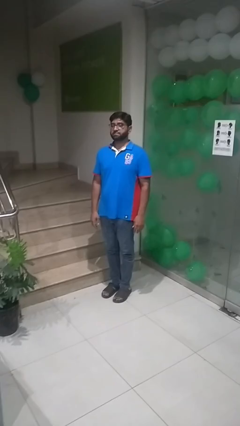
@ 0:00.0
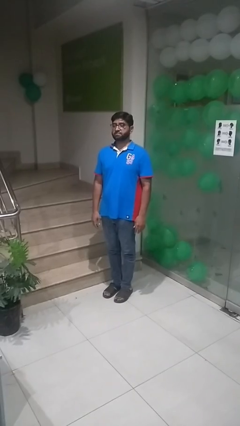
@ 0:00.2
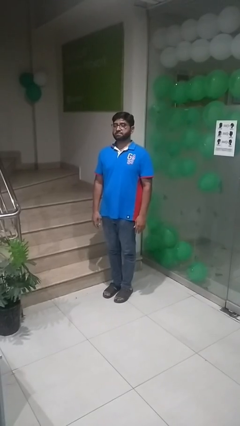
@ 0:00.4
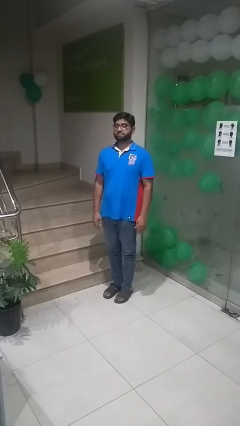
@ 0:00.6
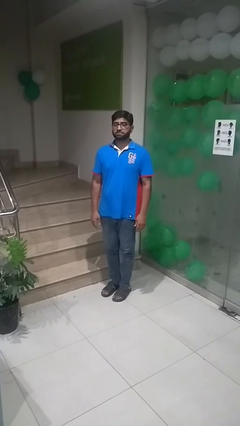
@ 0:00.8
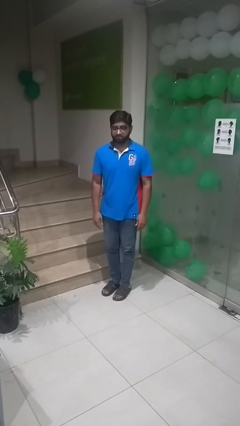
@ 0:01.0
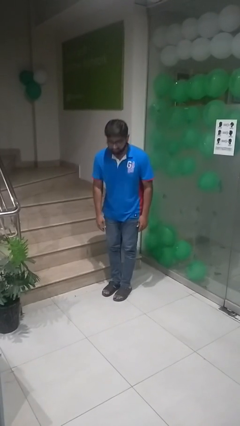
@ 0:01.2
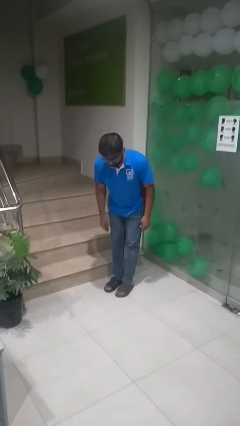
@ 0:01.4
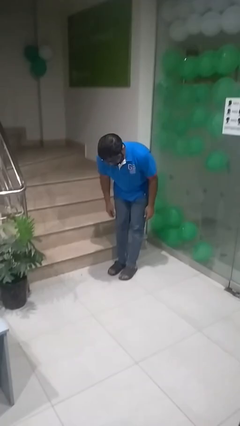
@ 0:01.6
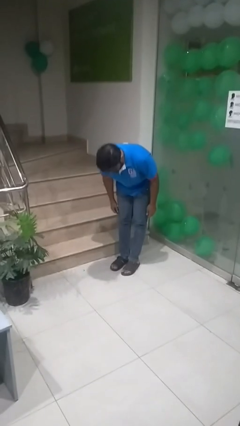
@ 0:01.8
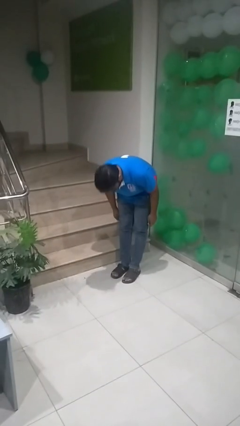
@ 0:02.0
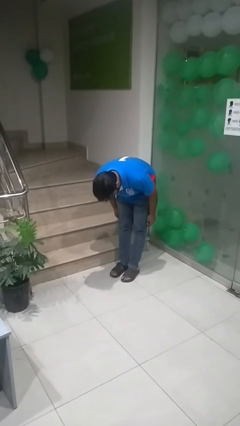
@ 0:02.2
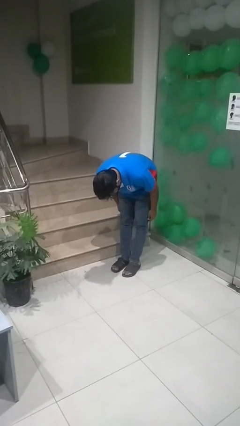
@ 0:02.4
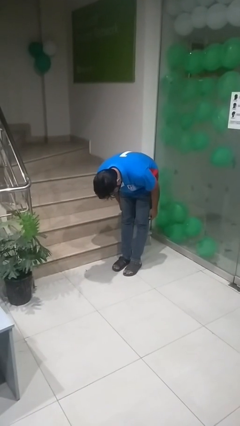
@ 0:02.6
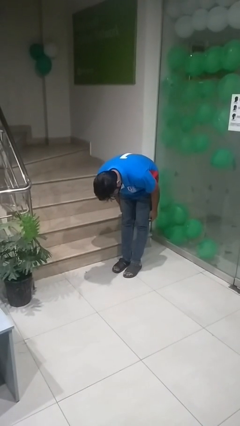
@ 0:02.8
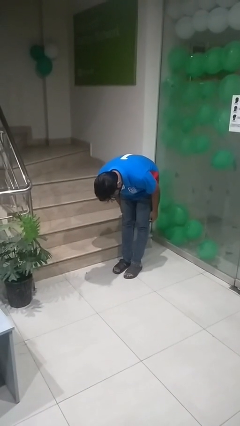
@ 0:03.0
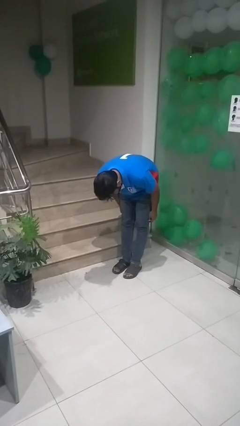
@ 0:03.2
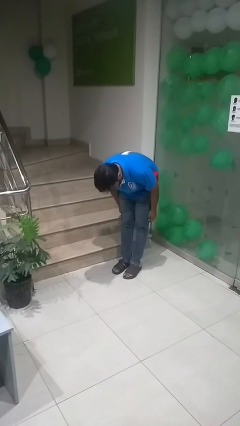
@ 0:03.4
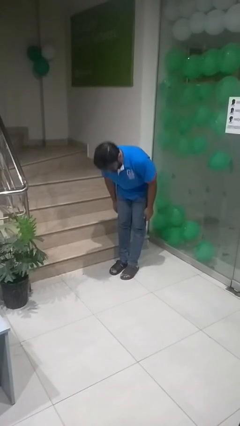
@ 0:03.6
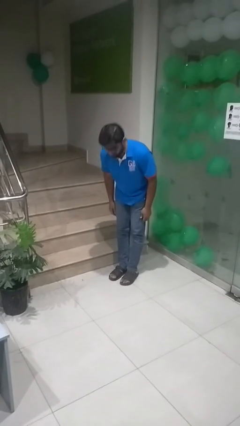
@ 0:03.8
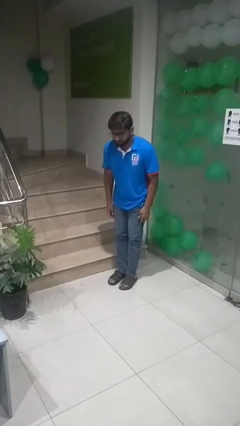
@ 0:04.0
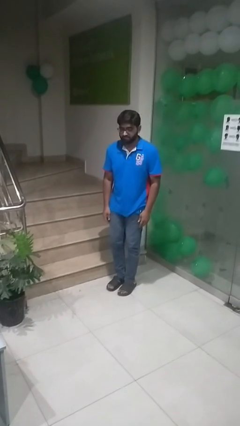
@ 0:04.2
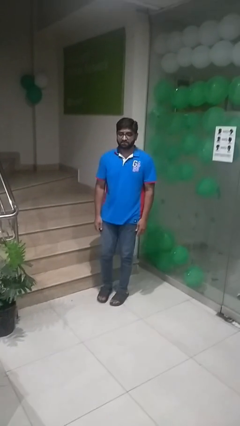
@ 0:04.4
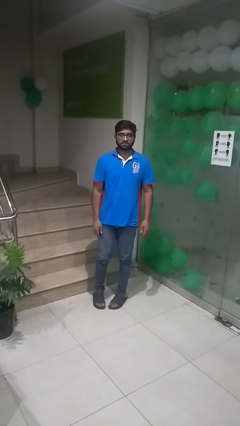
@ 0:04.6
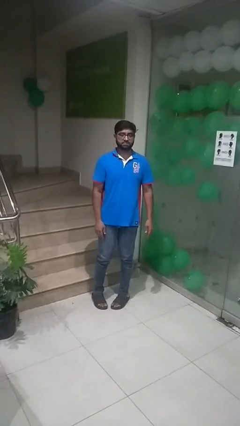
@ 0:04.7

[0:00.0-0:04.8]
person bows

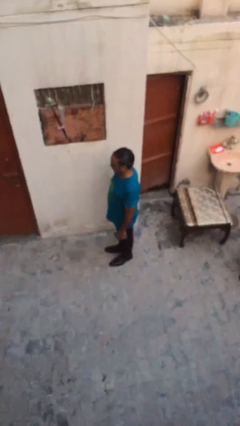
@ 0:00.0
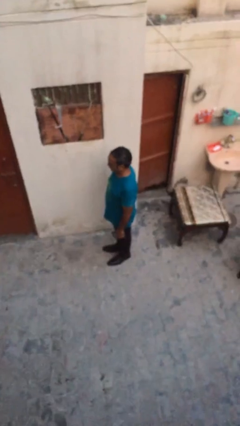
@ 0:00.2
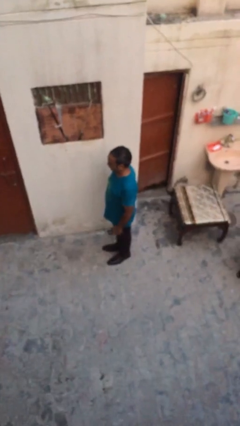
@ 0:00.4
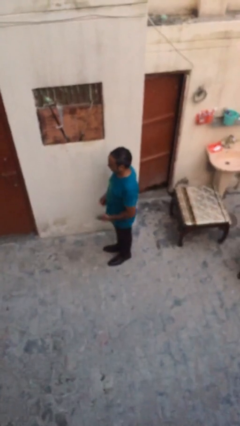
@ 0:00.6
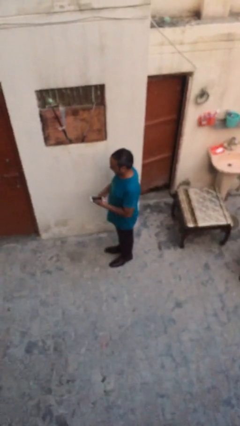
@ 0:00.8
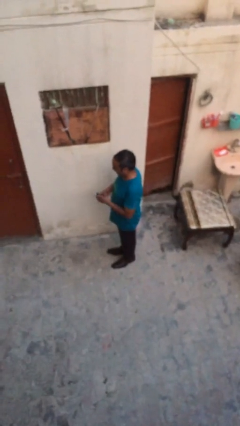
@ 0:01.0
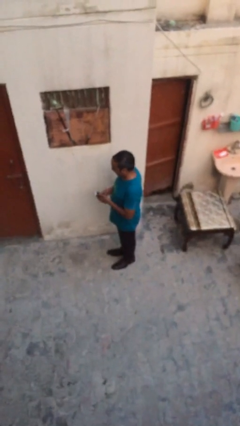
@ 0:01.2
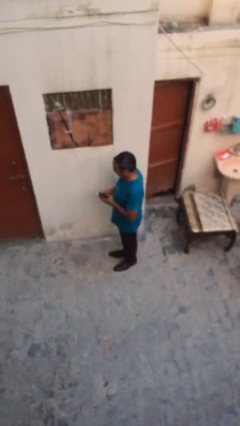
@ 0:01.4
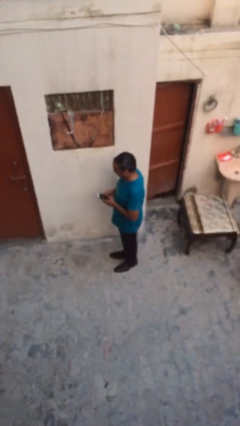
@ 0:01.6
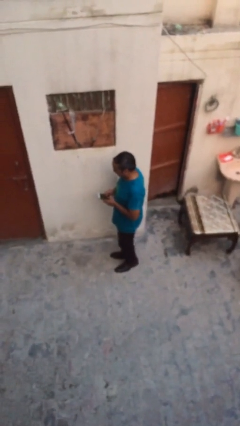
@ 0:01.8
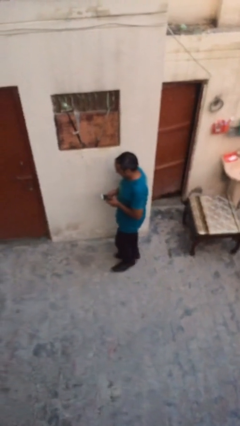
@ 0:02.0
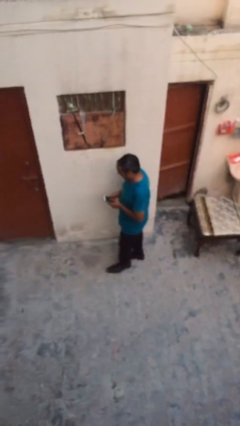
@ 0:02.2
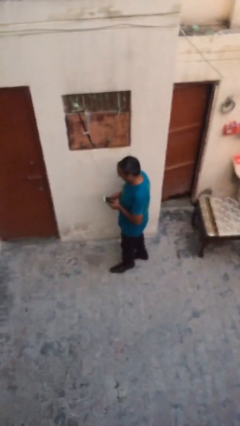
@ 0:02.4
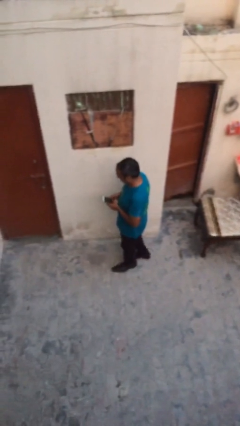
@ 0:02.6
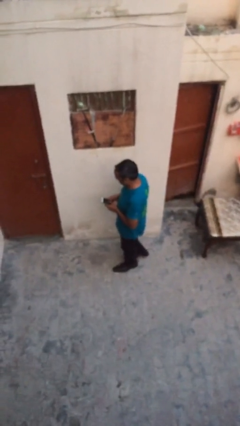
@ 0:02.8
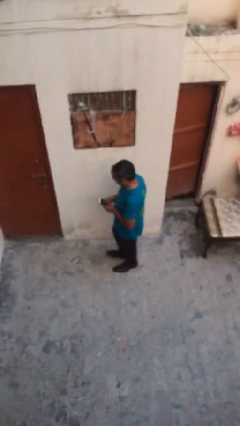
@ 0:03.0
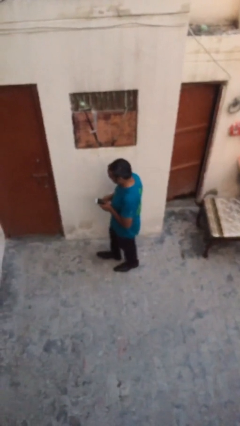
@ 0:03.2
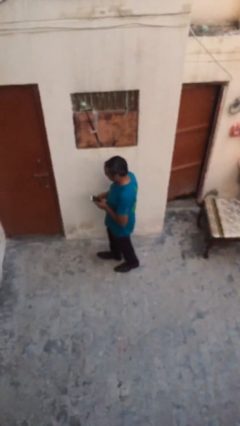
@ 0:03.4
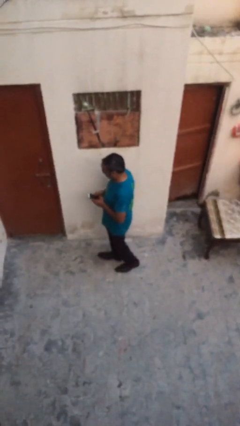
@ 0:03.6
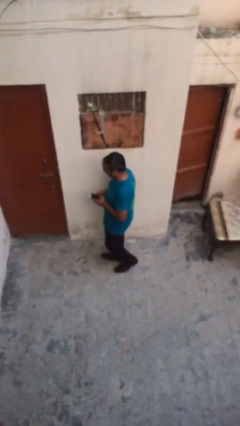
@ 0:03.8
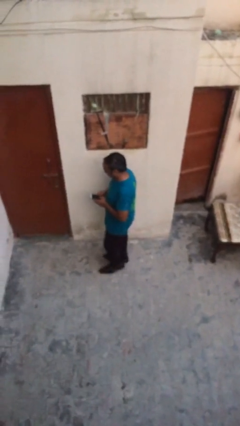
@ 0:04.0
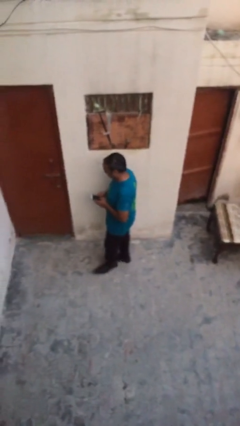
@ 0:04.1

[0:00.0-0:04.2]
person texts on phone

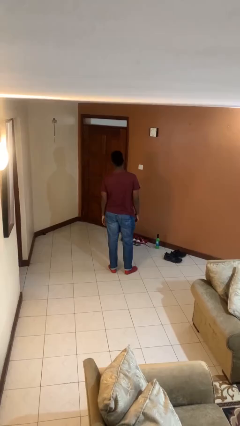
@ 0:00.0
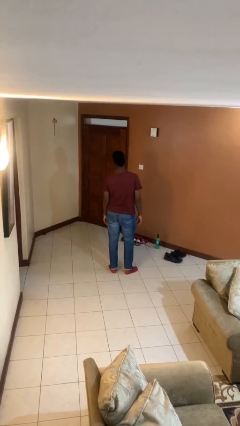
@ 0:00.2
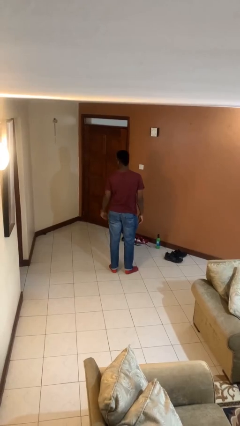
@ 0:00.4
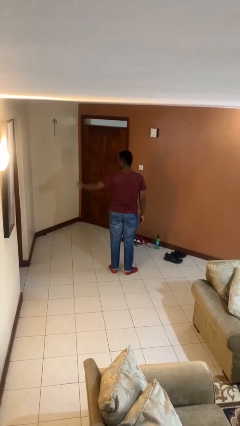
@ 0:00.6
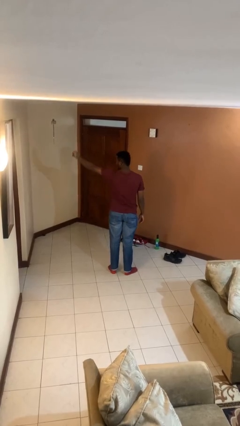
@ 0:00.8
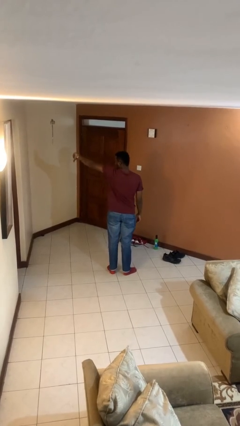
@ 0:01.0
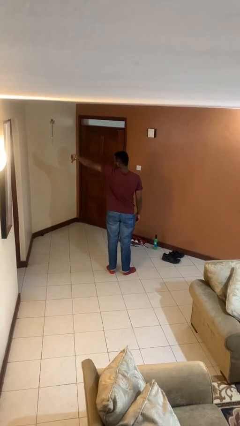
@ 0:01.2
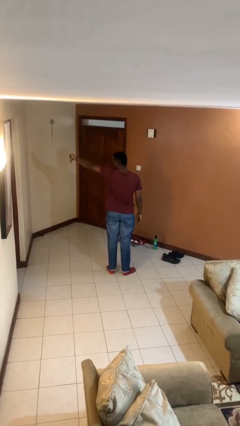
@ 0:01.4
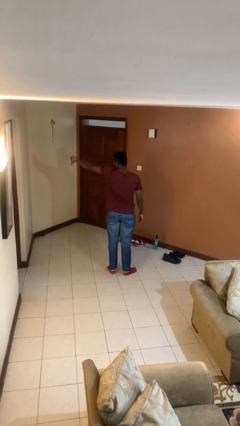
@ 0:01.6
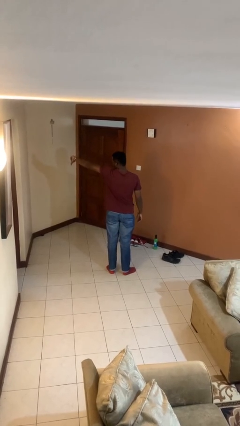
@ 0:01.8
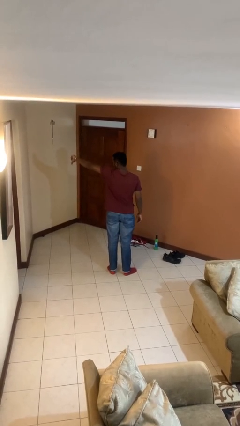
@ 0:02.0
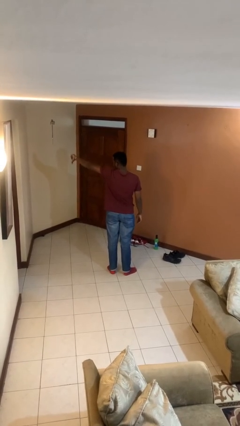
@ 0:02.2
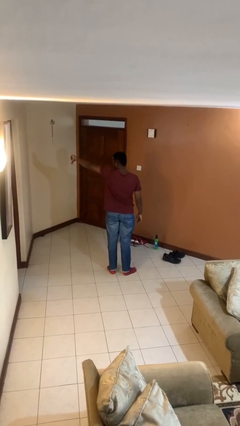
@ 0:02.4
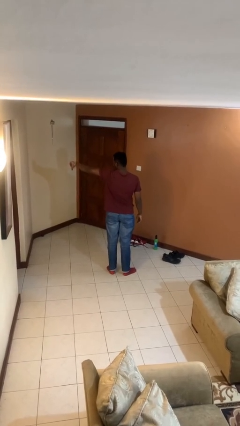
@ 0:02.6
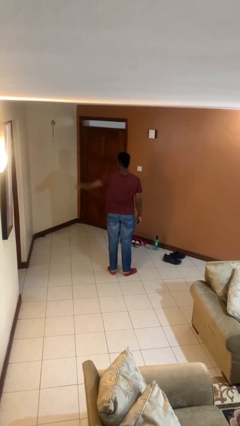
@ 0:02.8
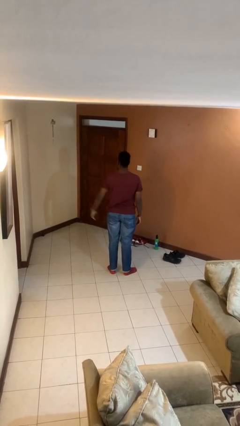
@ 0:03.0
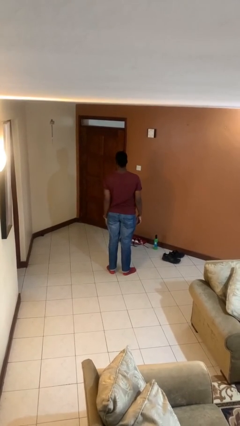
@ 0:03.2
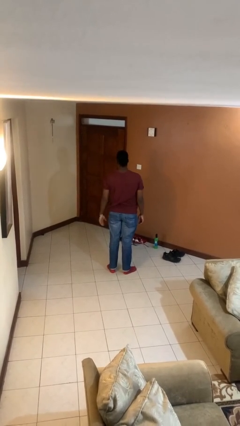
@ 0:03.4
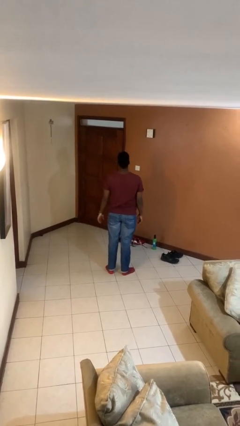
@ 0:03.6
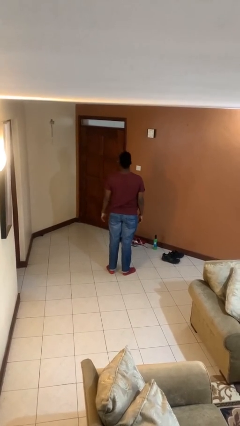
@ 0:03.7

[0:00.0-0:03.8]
person gestures thumbs down

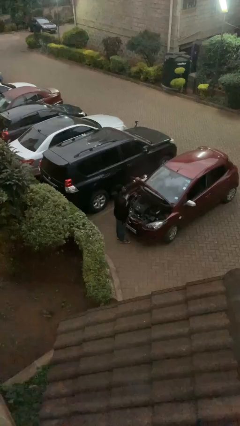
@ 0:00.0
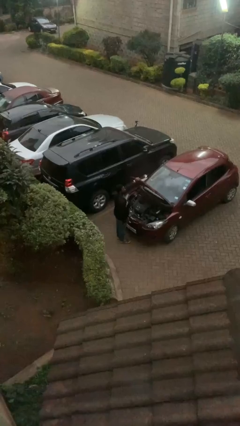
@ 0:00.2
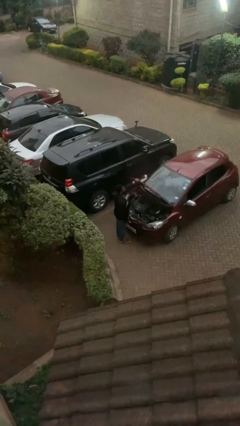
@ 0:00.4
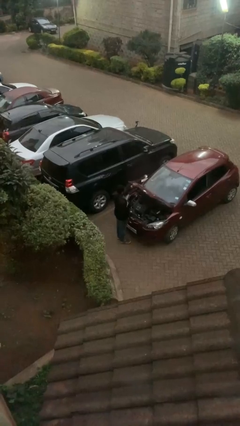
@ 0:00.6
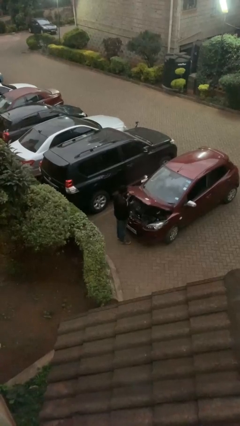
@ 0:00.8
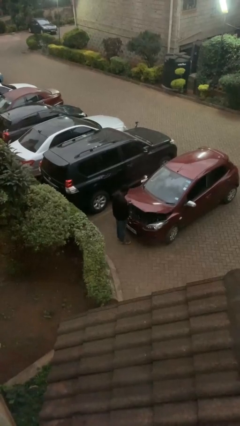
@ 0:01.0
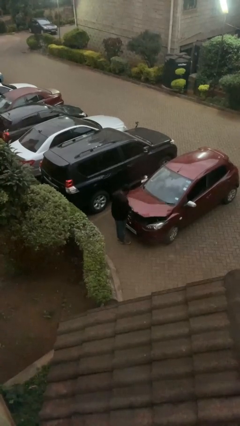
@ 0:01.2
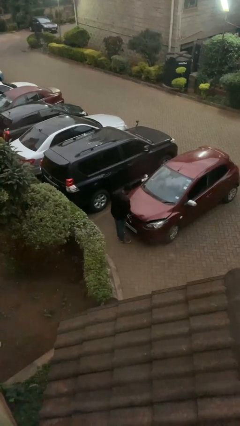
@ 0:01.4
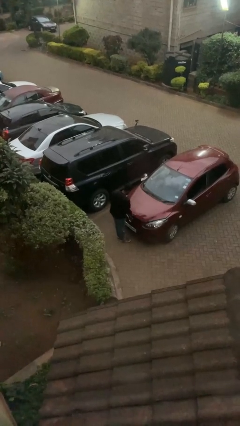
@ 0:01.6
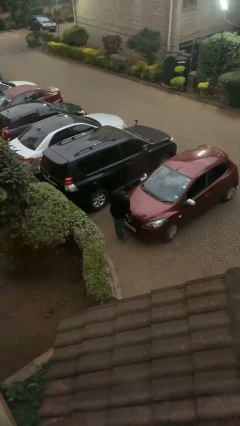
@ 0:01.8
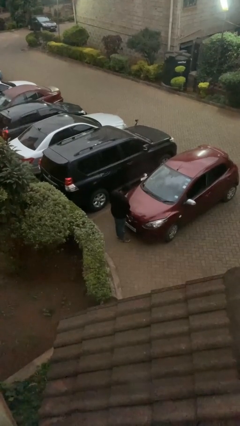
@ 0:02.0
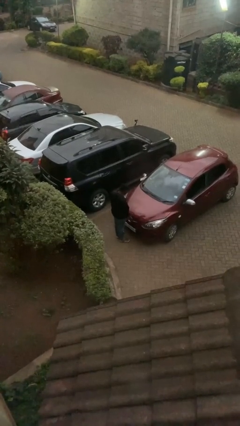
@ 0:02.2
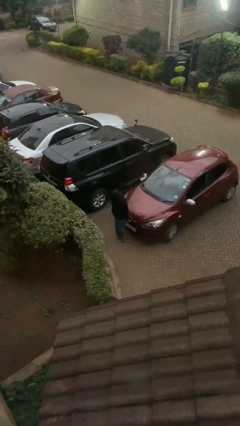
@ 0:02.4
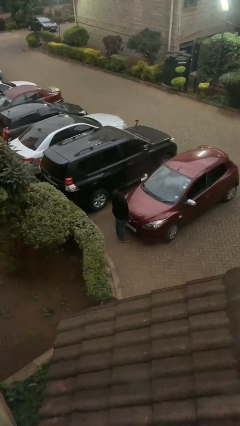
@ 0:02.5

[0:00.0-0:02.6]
person closes car hood

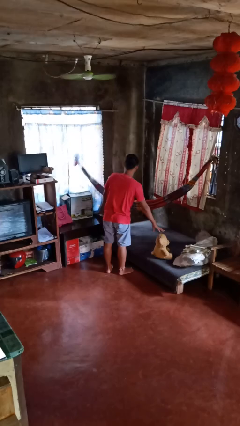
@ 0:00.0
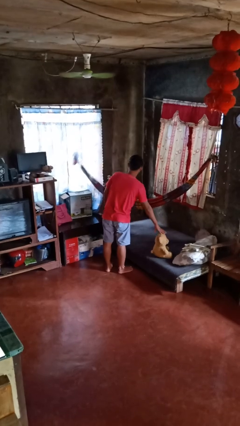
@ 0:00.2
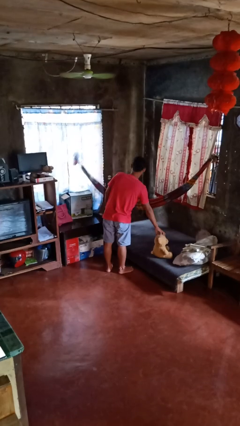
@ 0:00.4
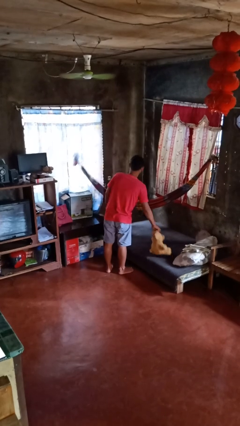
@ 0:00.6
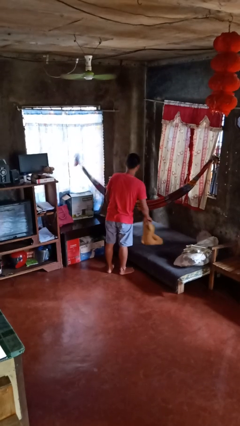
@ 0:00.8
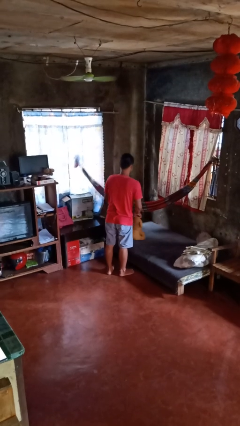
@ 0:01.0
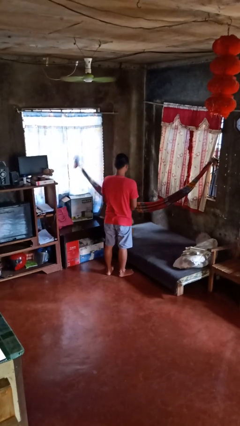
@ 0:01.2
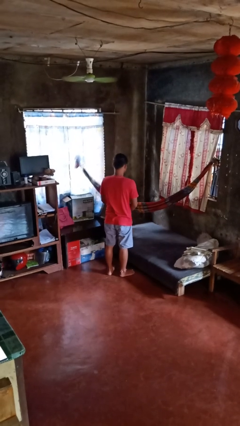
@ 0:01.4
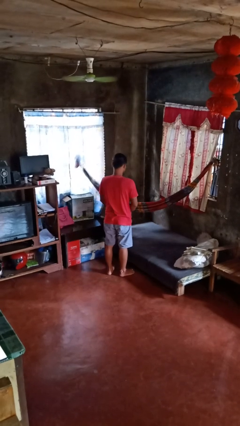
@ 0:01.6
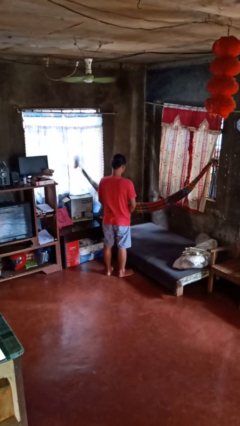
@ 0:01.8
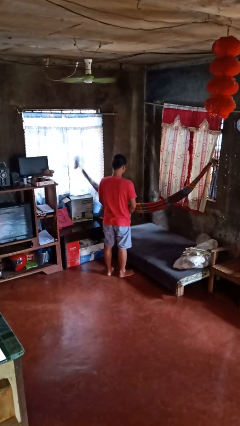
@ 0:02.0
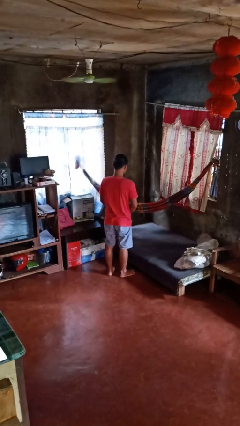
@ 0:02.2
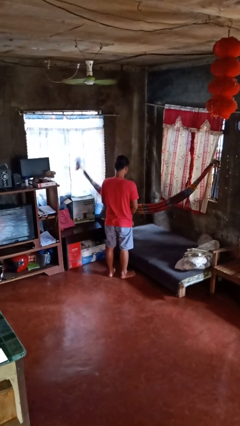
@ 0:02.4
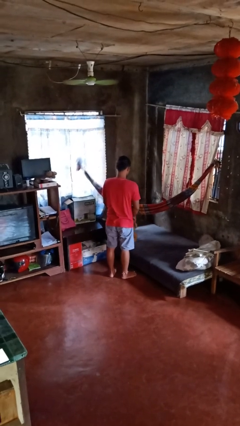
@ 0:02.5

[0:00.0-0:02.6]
person picks up object from bed
